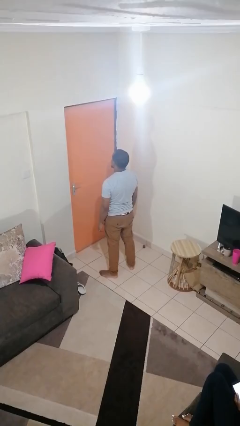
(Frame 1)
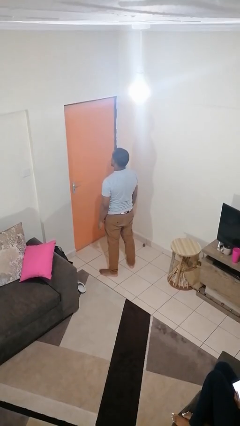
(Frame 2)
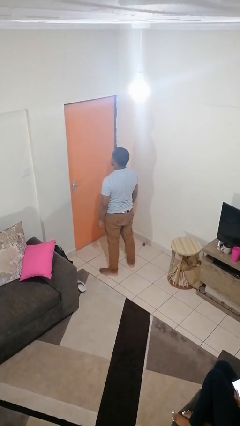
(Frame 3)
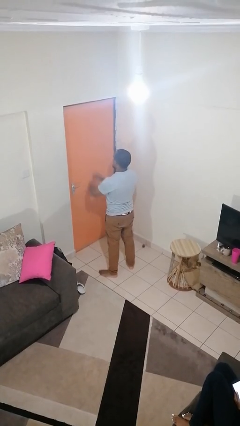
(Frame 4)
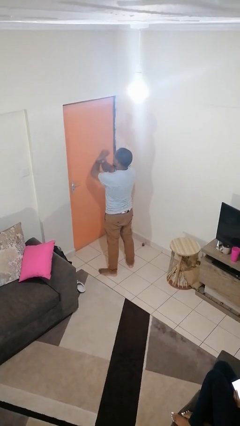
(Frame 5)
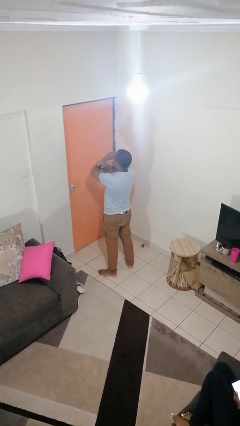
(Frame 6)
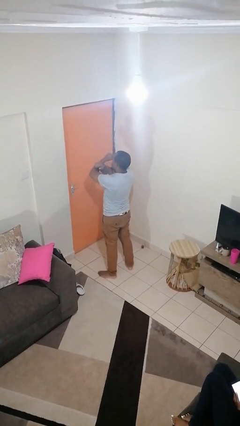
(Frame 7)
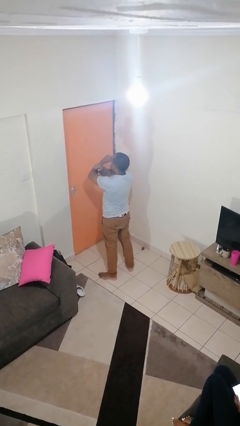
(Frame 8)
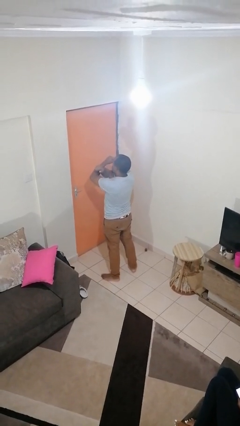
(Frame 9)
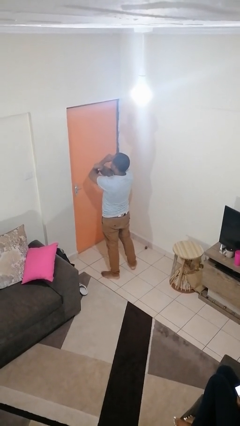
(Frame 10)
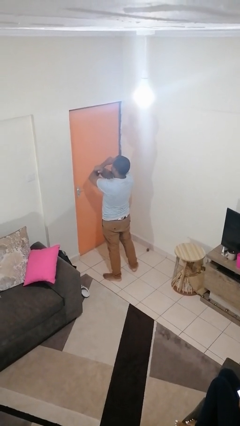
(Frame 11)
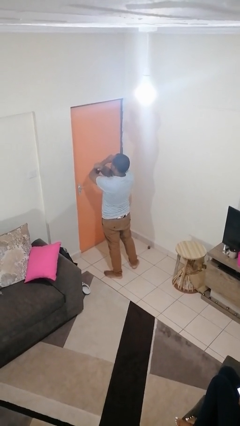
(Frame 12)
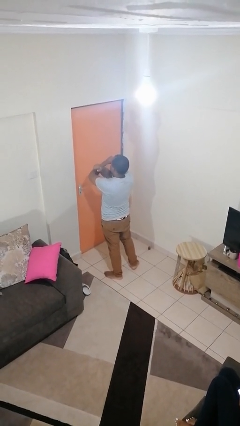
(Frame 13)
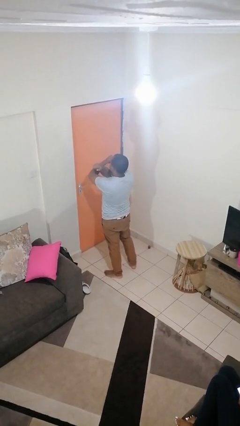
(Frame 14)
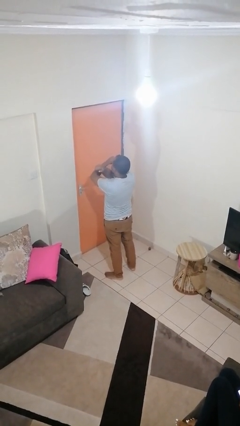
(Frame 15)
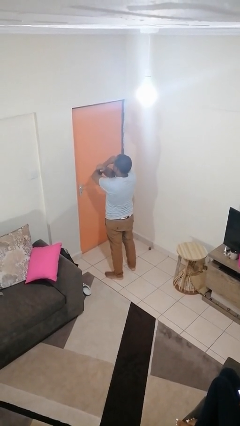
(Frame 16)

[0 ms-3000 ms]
person gestures arms x

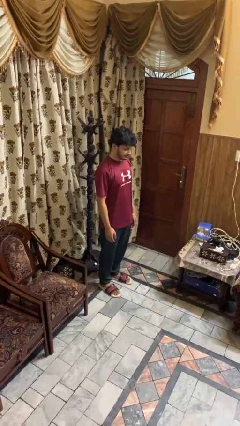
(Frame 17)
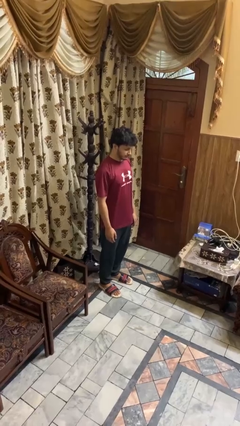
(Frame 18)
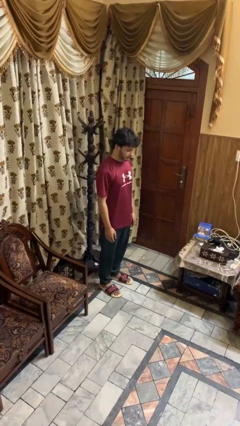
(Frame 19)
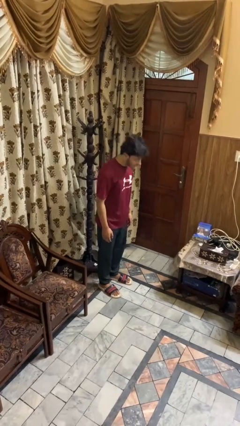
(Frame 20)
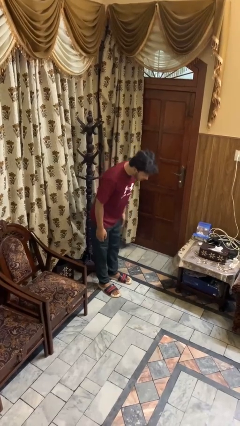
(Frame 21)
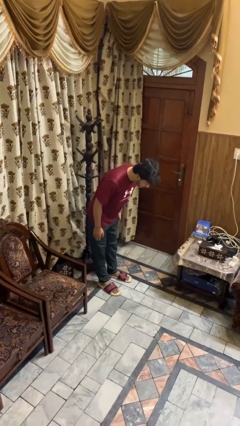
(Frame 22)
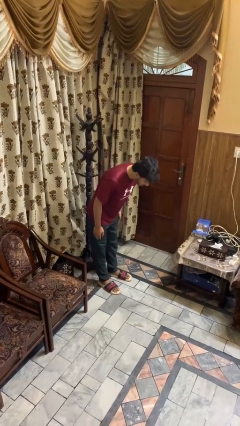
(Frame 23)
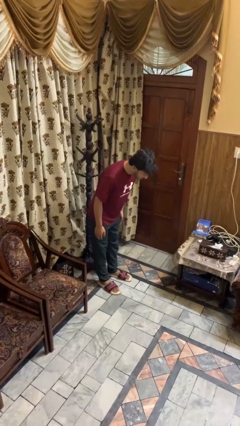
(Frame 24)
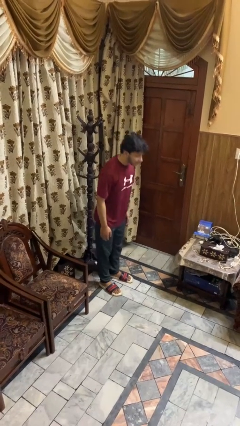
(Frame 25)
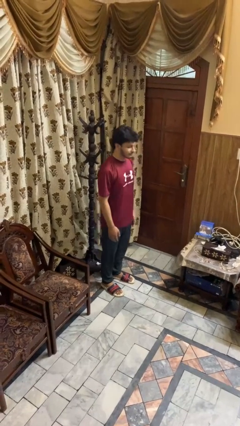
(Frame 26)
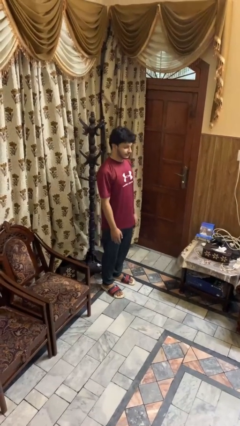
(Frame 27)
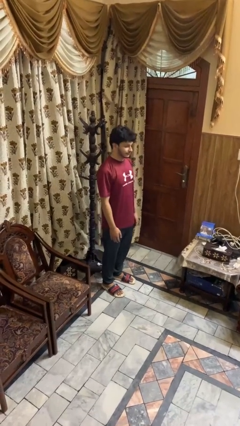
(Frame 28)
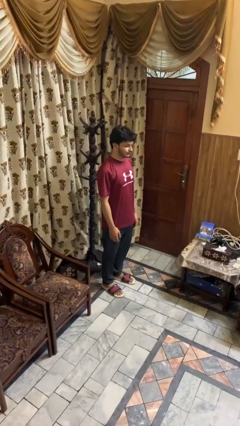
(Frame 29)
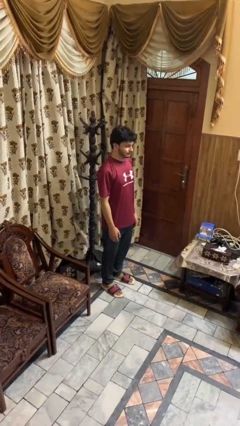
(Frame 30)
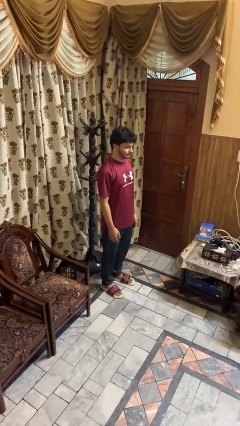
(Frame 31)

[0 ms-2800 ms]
person bows

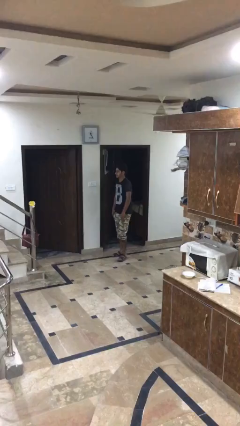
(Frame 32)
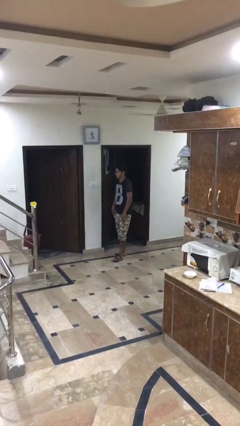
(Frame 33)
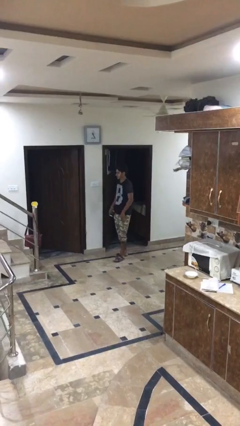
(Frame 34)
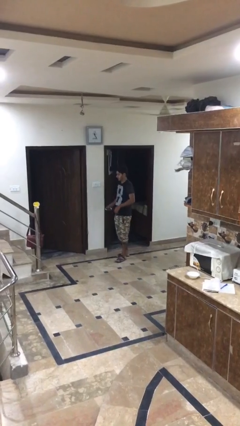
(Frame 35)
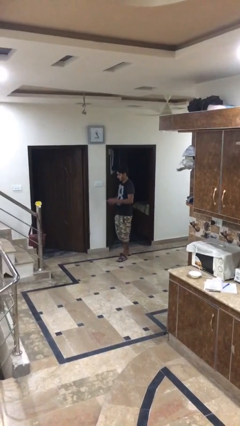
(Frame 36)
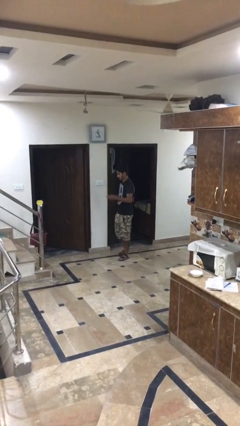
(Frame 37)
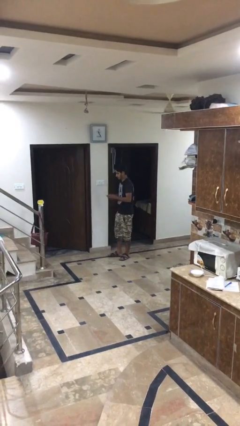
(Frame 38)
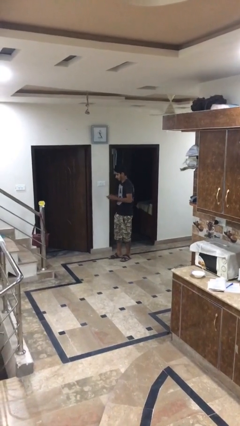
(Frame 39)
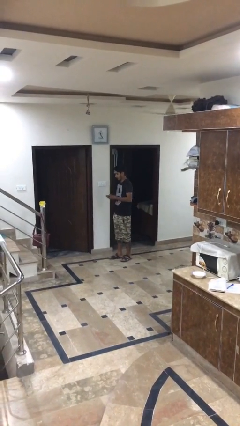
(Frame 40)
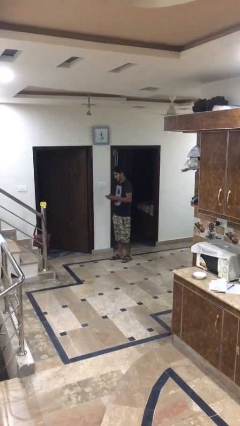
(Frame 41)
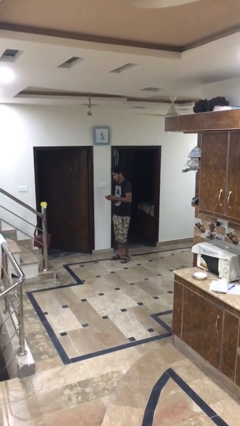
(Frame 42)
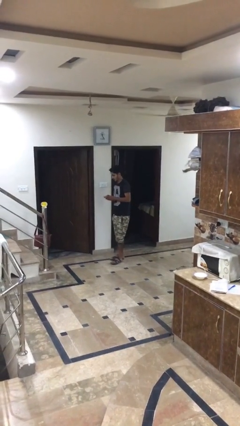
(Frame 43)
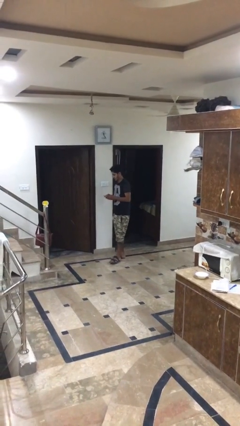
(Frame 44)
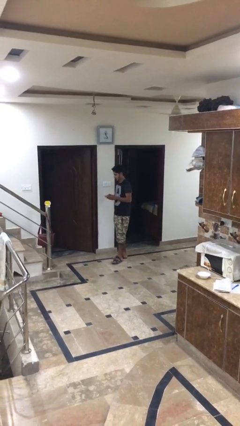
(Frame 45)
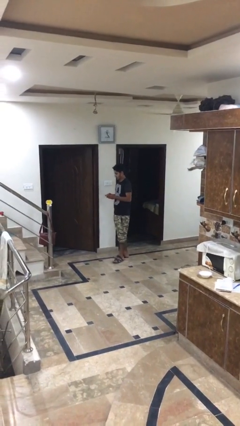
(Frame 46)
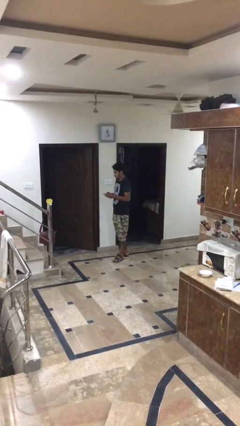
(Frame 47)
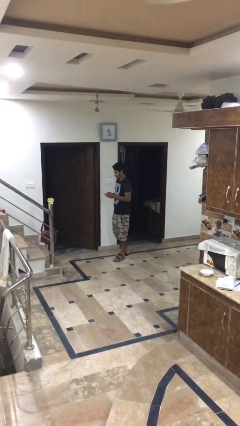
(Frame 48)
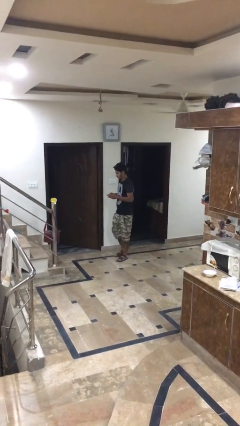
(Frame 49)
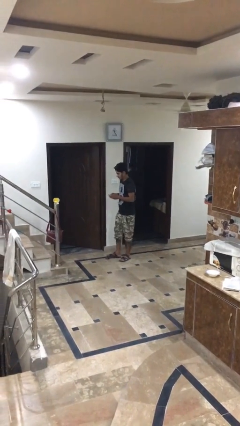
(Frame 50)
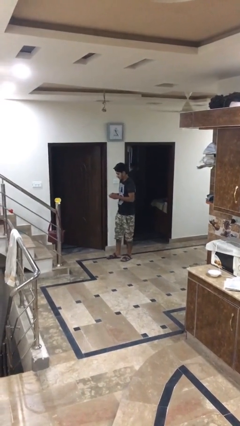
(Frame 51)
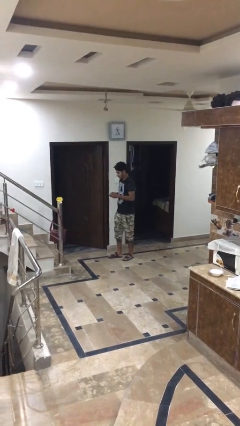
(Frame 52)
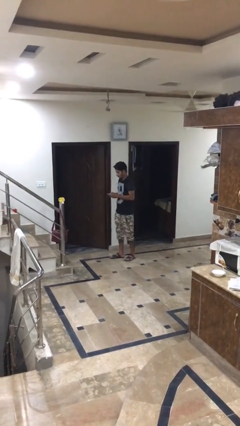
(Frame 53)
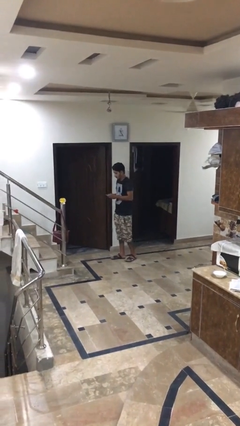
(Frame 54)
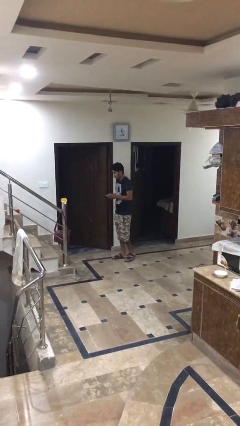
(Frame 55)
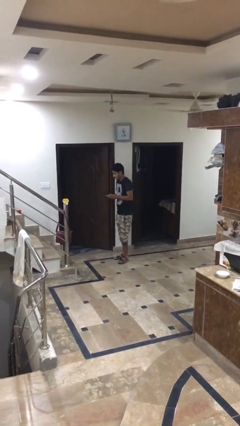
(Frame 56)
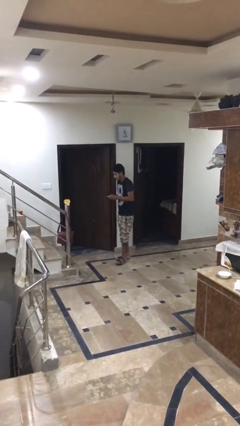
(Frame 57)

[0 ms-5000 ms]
person texts on phone

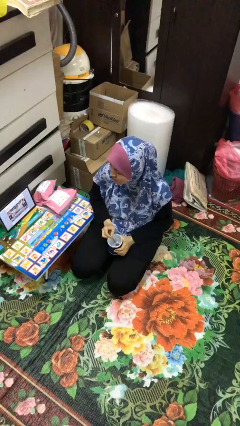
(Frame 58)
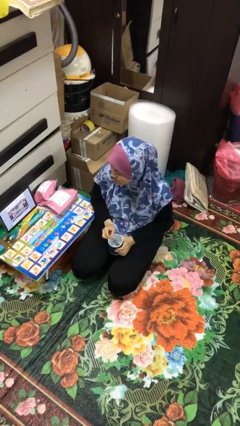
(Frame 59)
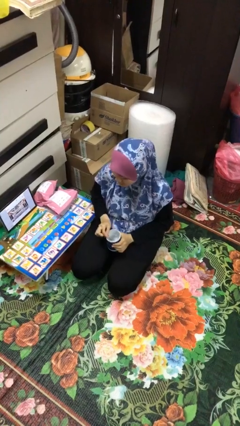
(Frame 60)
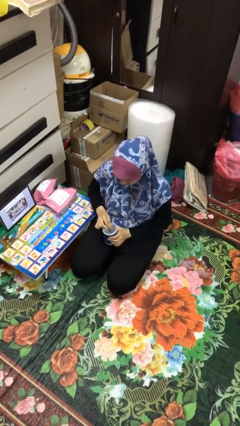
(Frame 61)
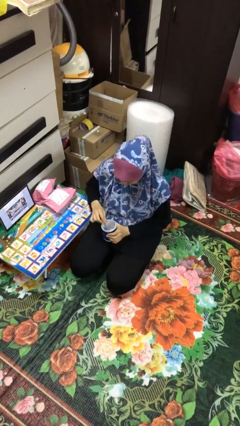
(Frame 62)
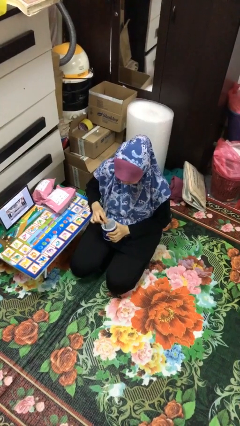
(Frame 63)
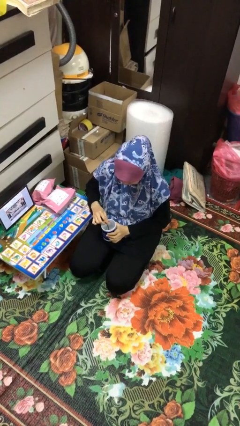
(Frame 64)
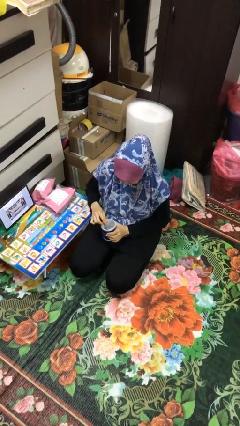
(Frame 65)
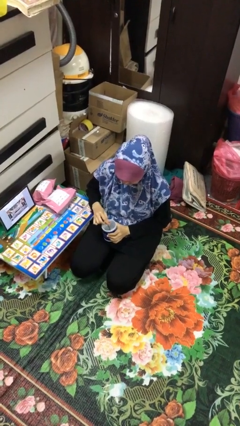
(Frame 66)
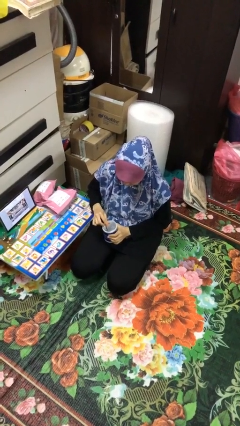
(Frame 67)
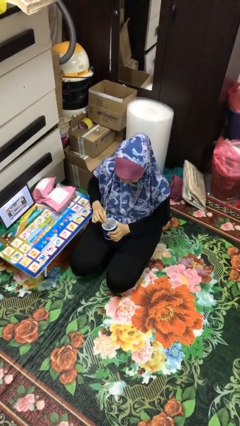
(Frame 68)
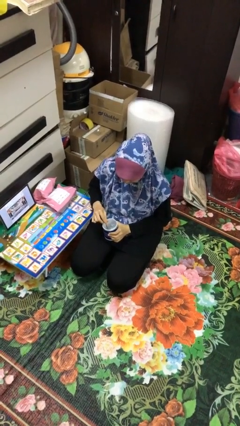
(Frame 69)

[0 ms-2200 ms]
person stirs mug

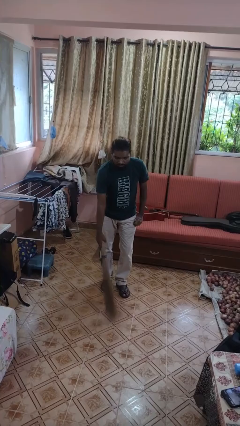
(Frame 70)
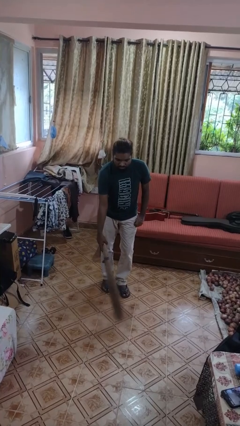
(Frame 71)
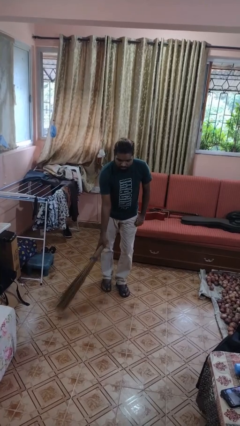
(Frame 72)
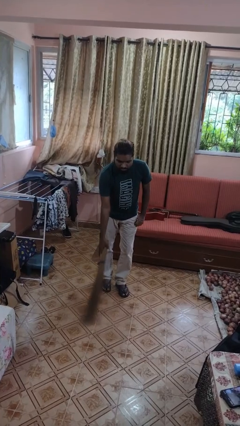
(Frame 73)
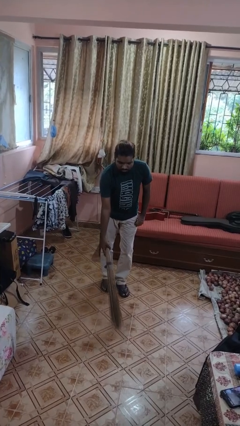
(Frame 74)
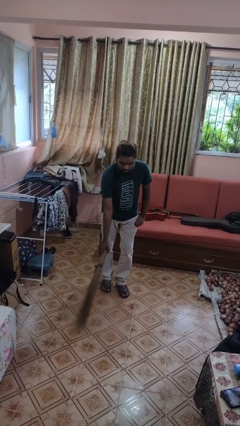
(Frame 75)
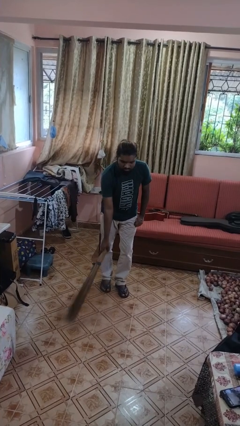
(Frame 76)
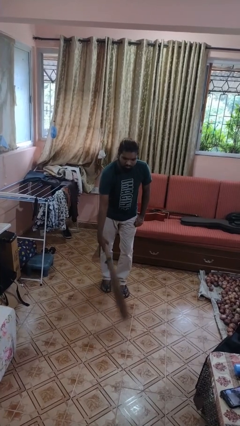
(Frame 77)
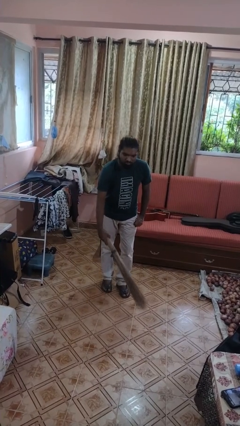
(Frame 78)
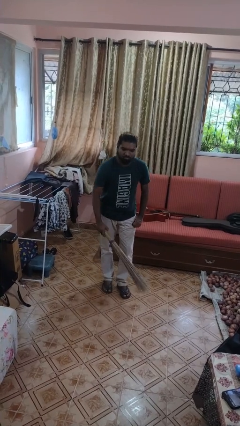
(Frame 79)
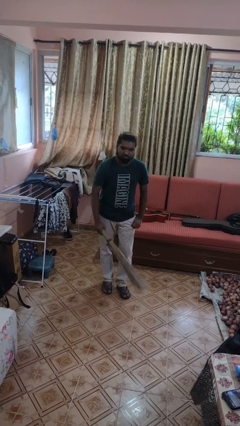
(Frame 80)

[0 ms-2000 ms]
person sweeps floor

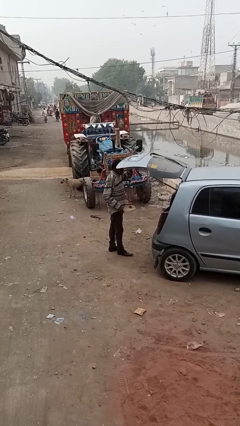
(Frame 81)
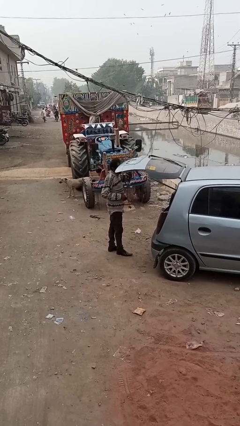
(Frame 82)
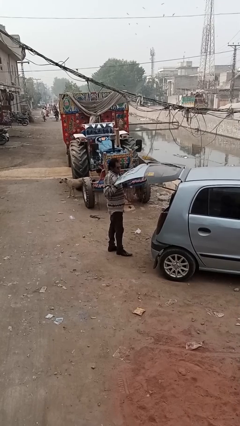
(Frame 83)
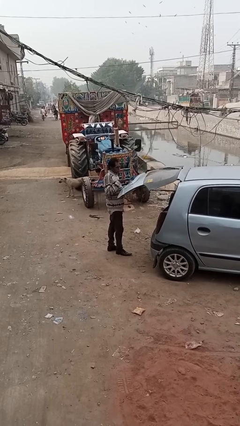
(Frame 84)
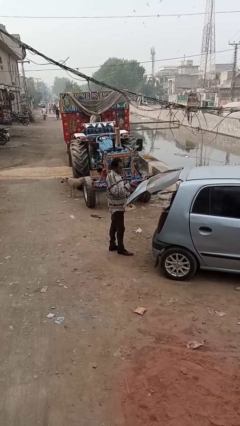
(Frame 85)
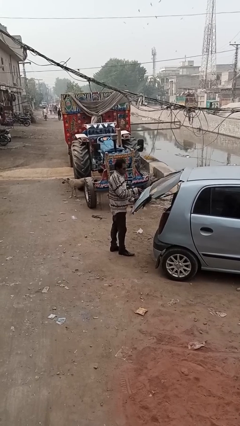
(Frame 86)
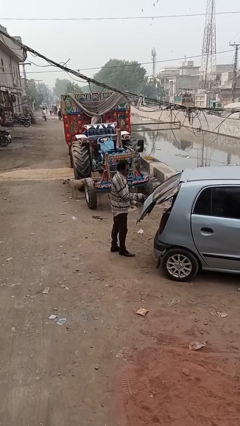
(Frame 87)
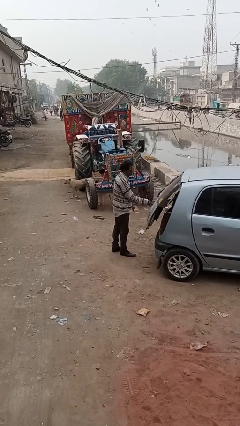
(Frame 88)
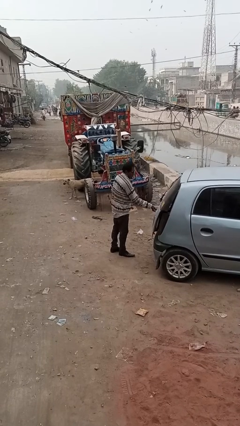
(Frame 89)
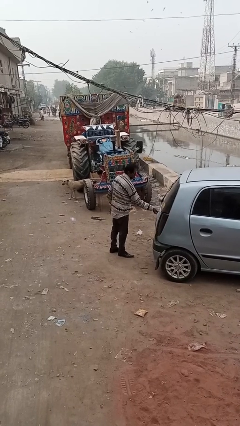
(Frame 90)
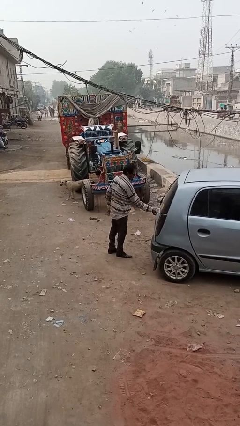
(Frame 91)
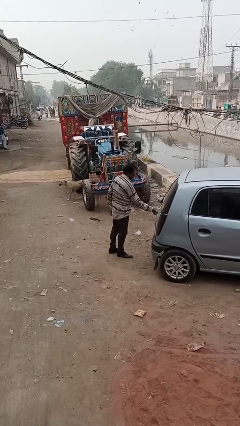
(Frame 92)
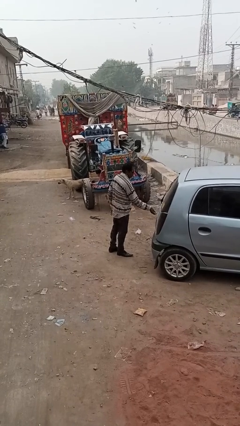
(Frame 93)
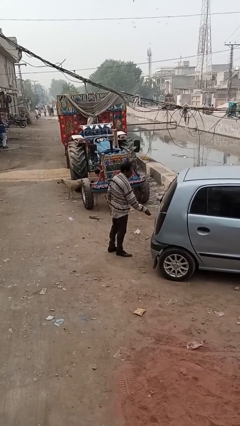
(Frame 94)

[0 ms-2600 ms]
person closes car trunk
